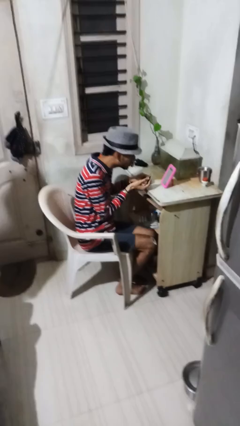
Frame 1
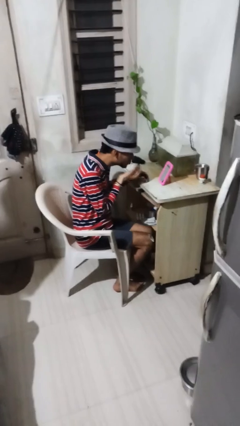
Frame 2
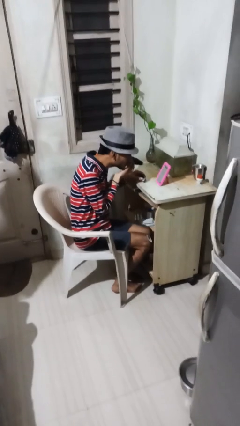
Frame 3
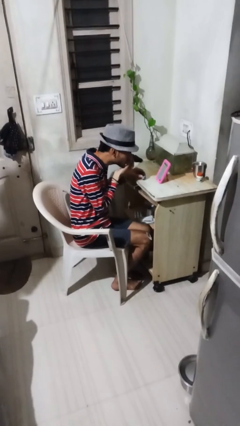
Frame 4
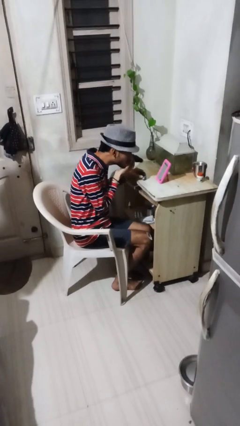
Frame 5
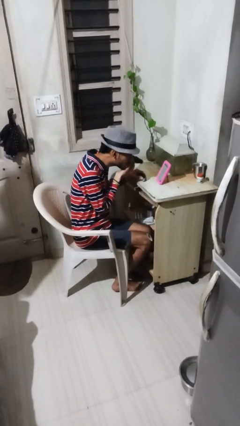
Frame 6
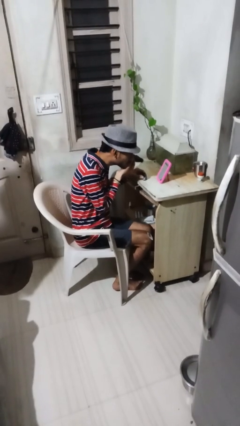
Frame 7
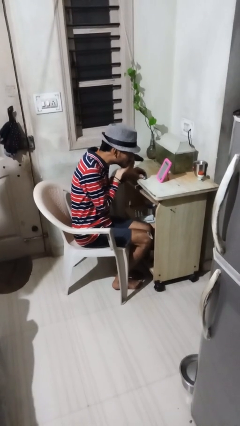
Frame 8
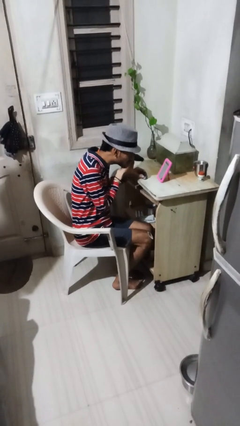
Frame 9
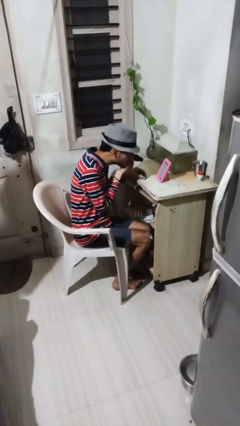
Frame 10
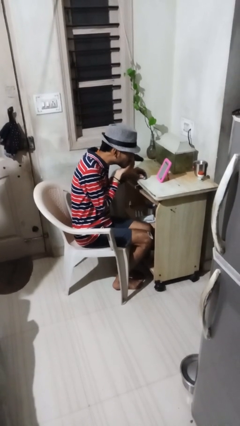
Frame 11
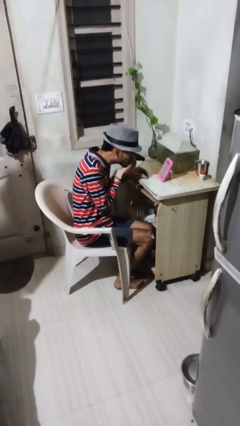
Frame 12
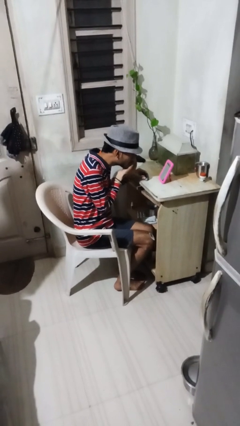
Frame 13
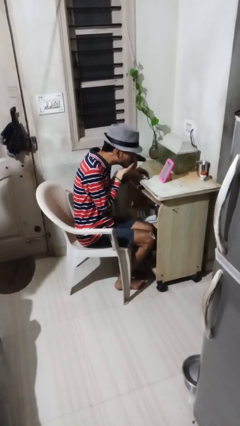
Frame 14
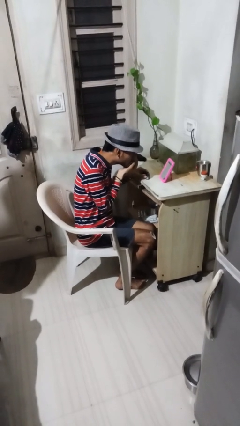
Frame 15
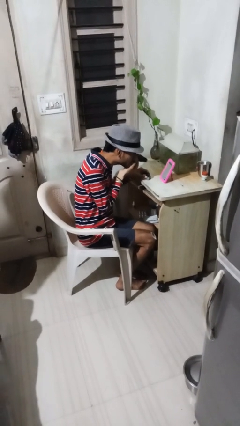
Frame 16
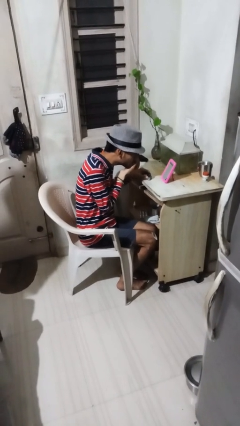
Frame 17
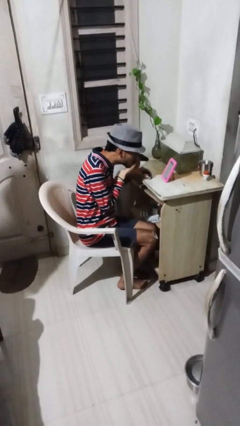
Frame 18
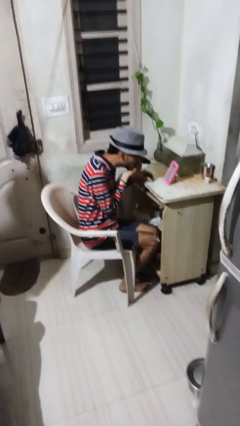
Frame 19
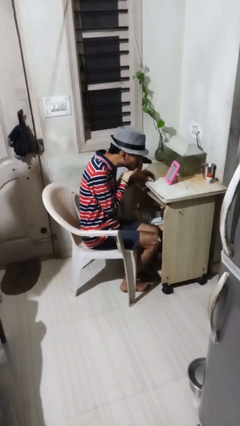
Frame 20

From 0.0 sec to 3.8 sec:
person applies eye makeup

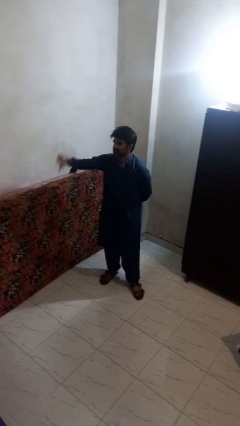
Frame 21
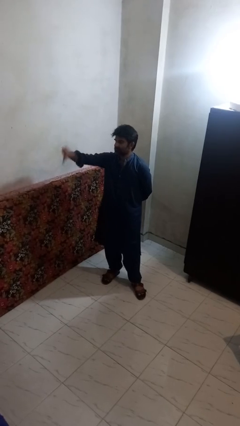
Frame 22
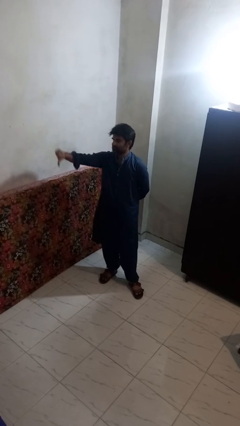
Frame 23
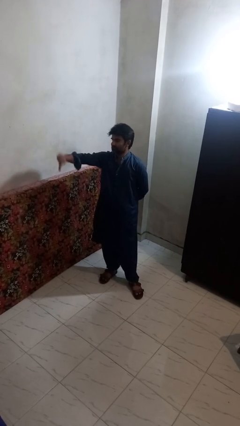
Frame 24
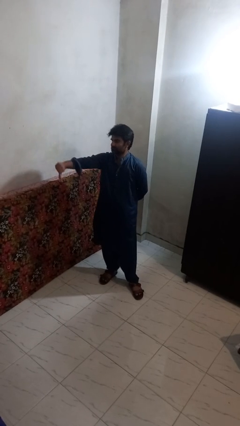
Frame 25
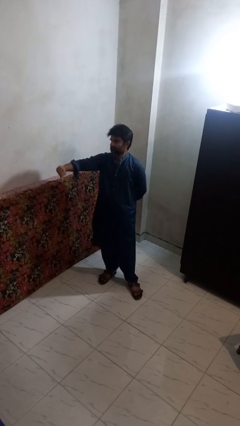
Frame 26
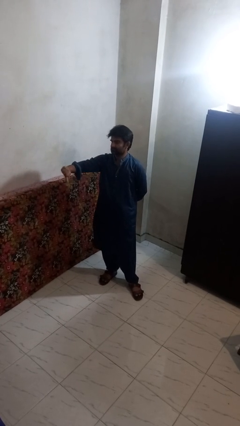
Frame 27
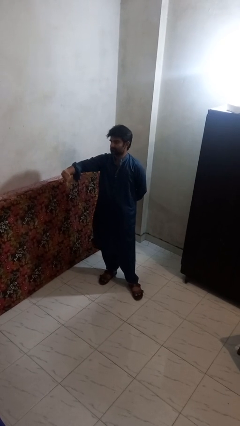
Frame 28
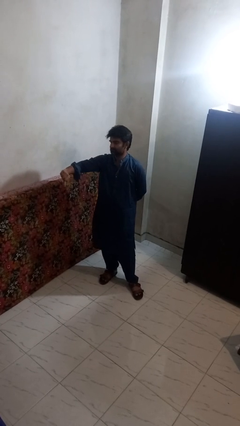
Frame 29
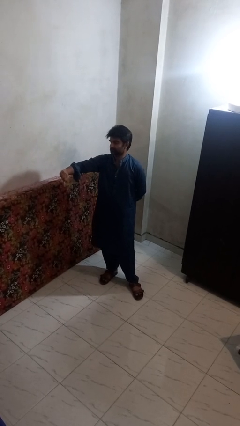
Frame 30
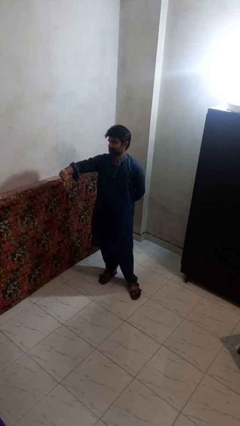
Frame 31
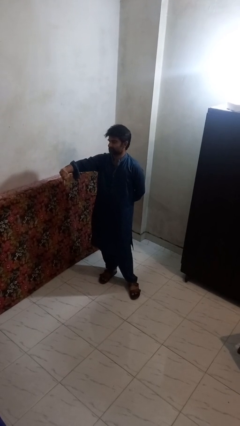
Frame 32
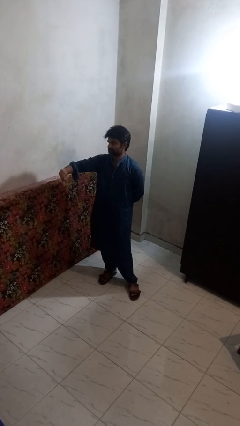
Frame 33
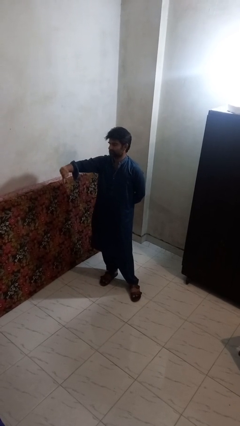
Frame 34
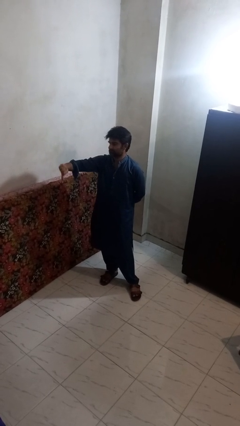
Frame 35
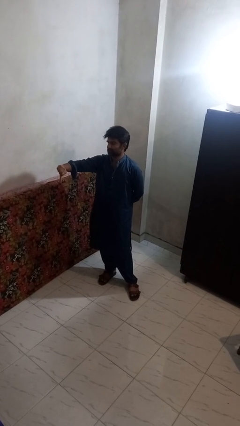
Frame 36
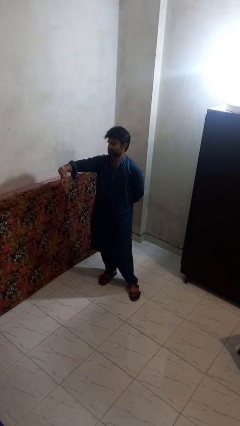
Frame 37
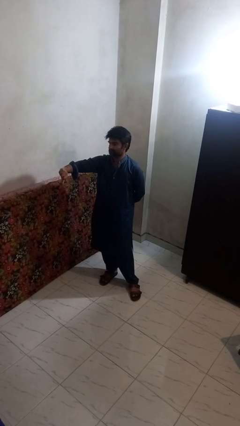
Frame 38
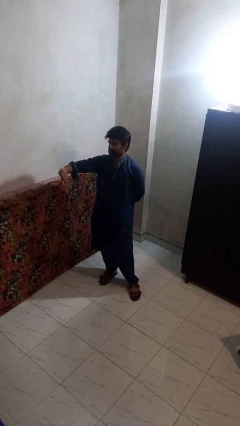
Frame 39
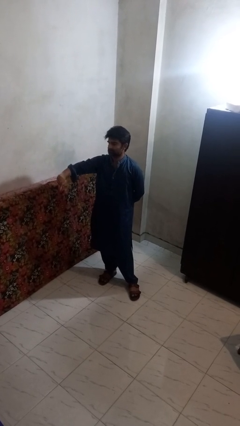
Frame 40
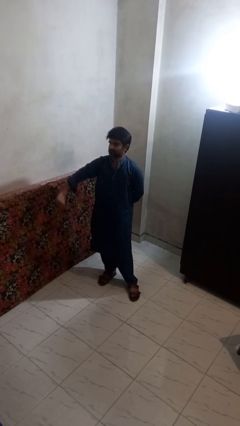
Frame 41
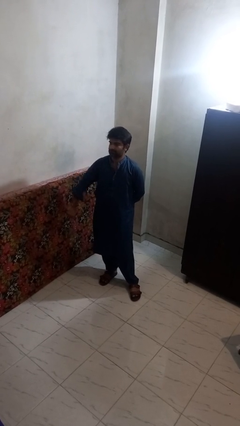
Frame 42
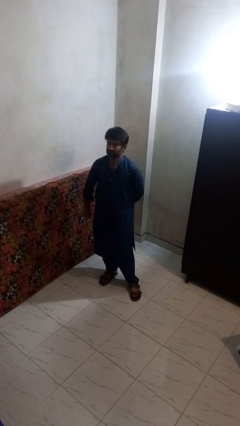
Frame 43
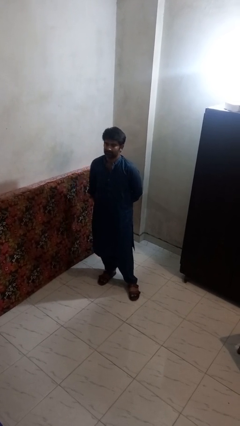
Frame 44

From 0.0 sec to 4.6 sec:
person gestures thumbs down

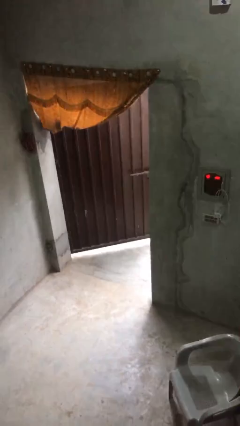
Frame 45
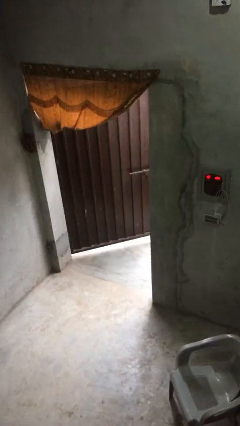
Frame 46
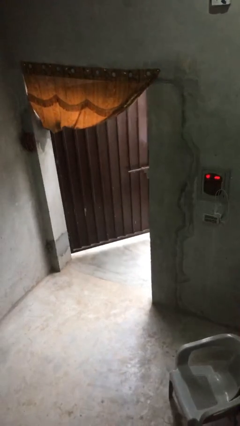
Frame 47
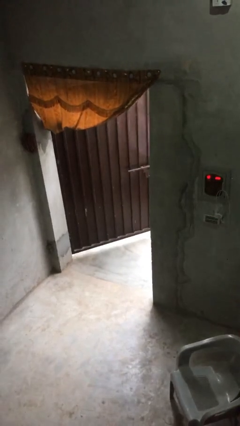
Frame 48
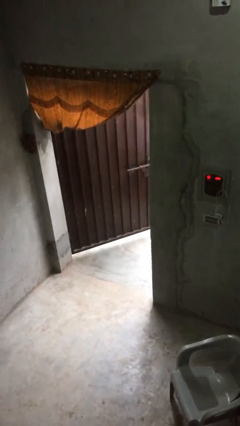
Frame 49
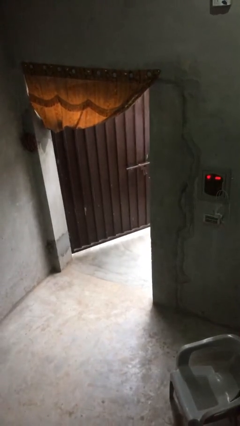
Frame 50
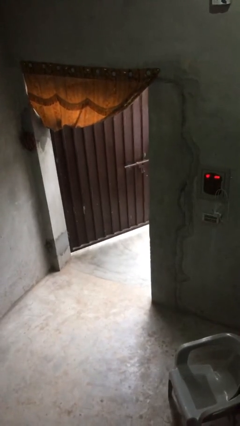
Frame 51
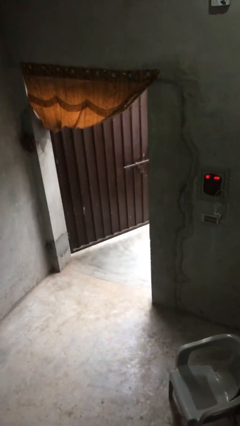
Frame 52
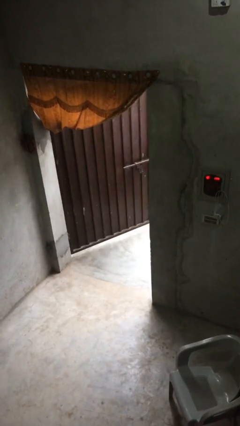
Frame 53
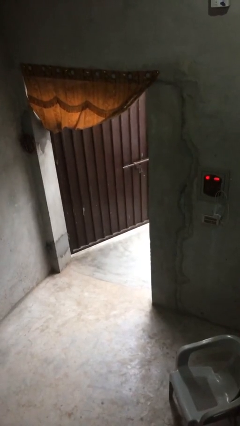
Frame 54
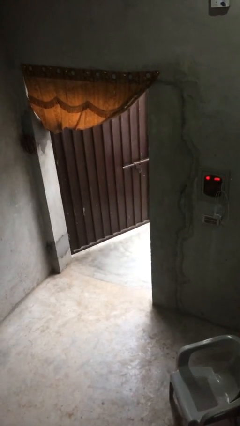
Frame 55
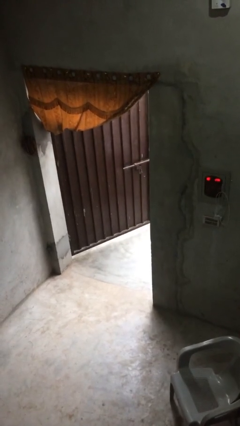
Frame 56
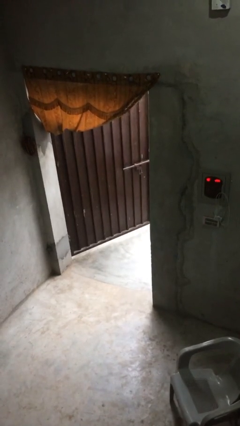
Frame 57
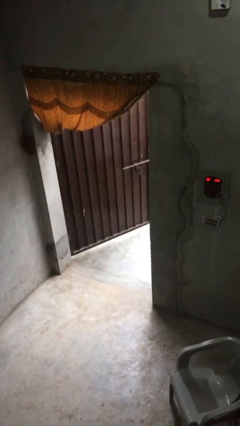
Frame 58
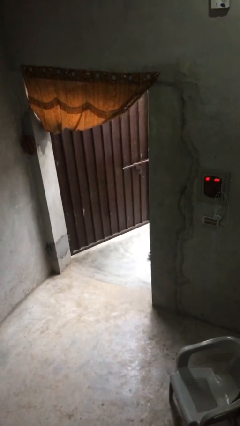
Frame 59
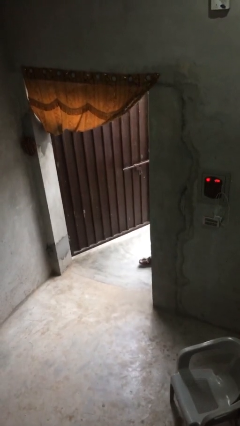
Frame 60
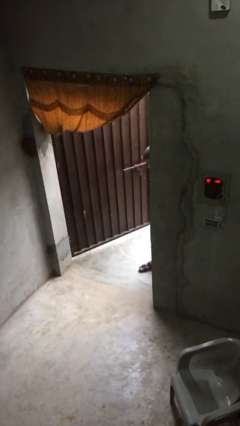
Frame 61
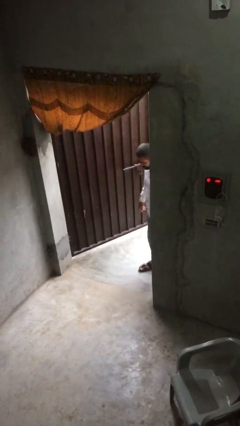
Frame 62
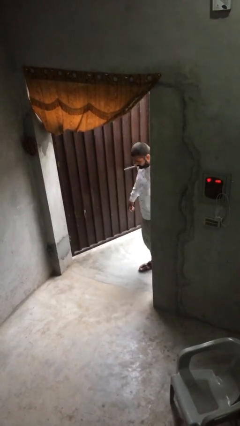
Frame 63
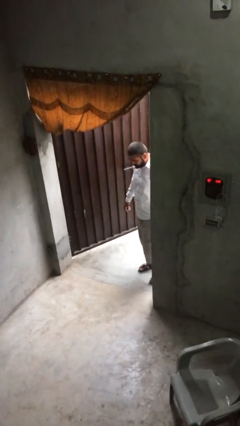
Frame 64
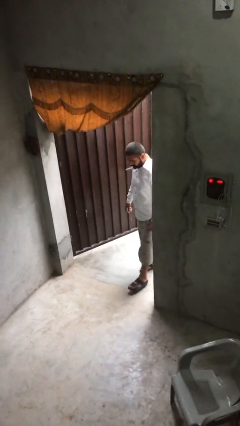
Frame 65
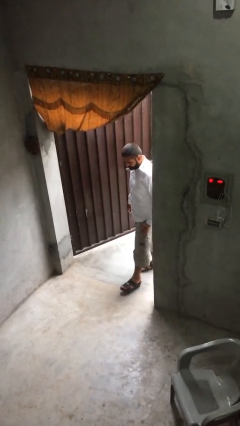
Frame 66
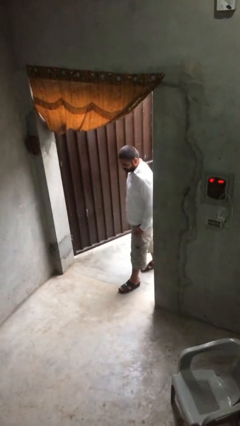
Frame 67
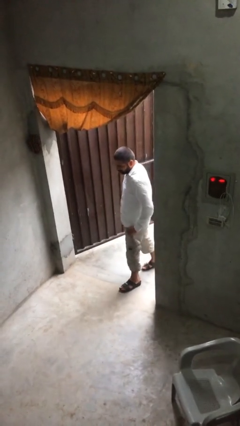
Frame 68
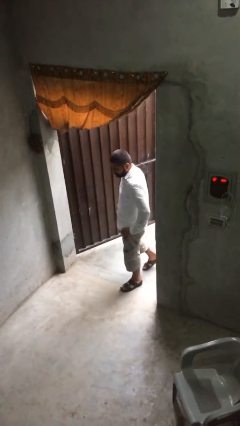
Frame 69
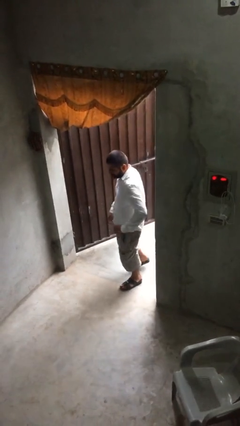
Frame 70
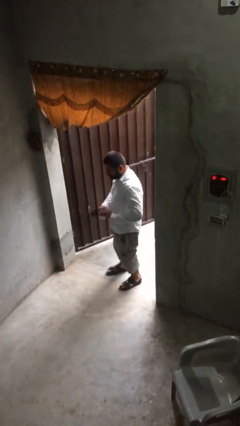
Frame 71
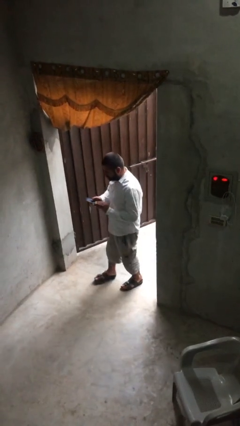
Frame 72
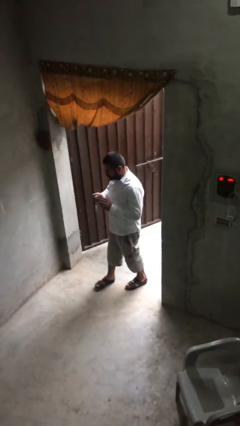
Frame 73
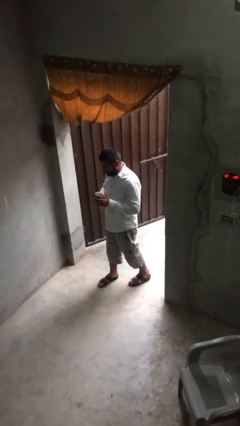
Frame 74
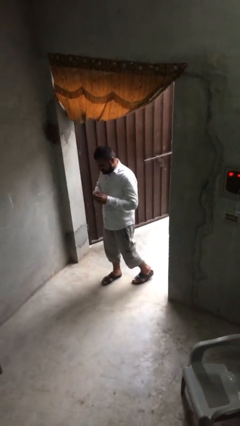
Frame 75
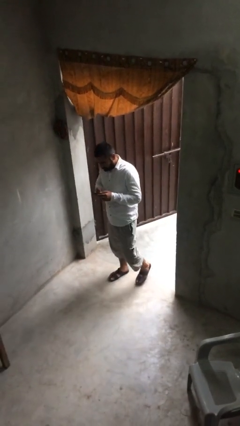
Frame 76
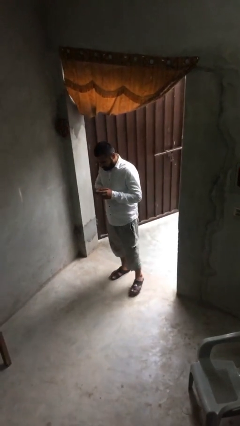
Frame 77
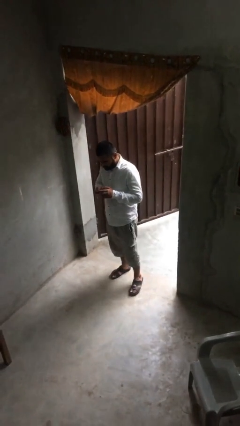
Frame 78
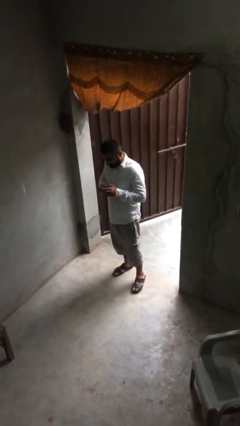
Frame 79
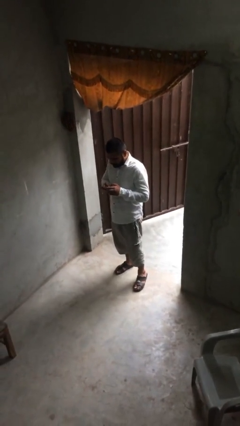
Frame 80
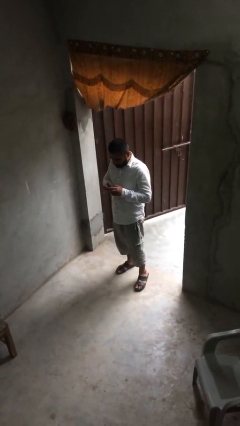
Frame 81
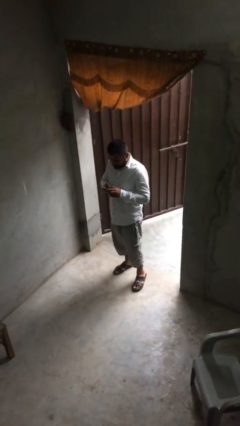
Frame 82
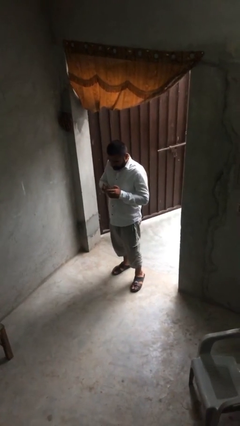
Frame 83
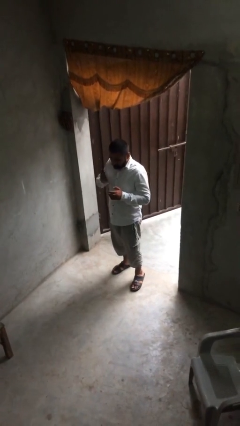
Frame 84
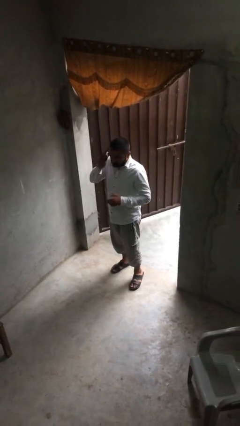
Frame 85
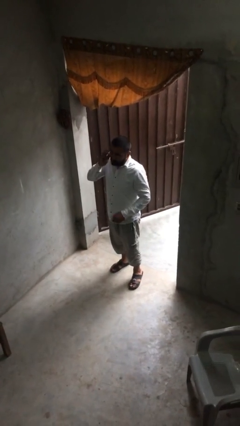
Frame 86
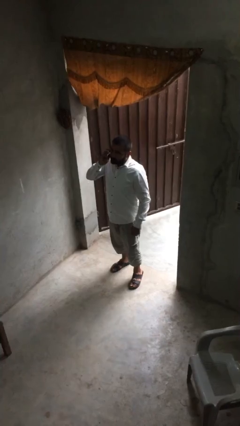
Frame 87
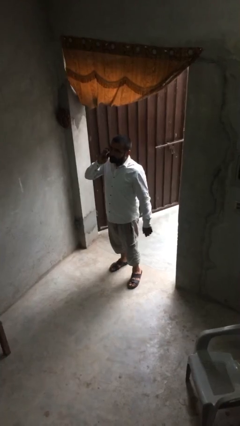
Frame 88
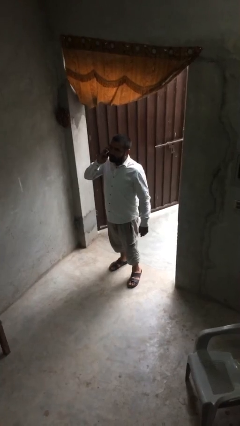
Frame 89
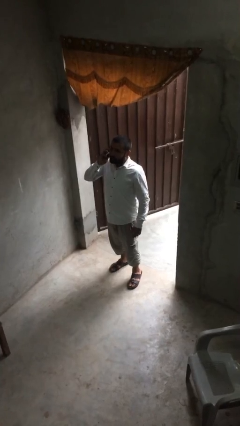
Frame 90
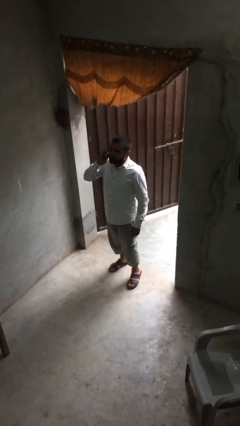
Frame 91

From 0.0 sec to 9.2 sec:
person enters scene through structure

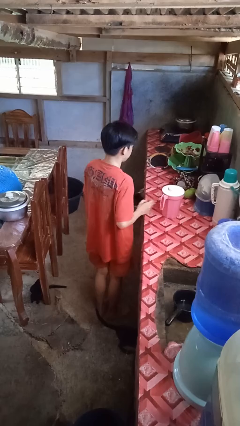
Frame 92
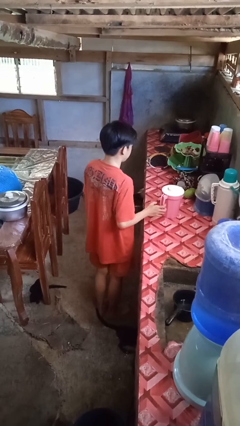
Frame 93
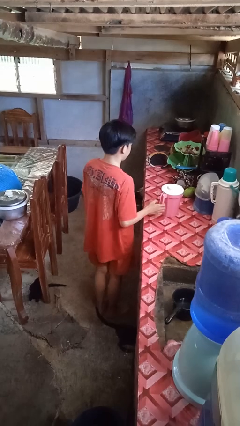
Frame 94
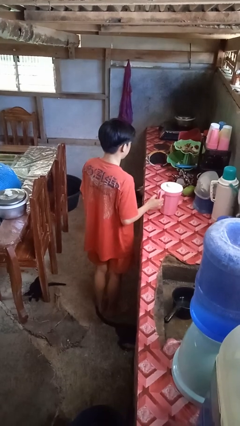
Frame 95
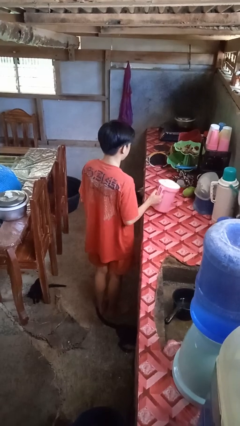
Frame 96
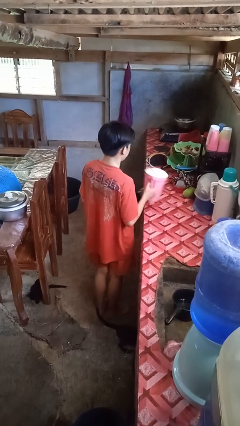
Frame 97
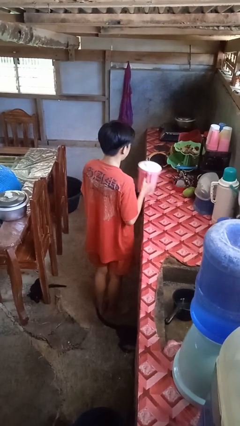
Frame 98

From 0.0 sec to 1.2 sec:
person picks up object from countertop
